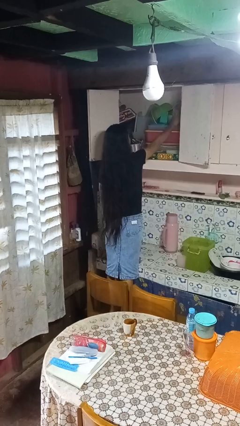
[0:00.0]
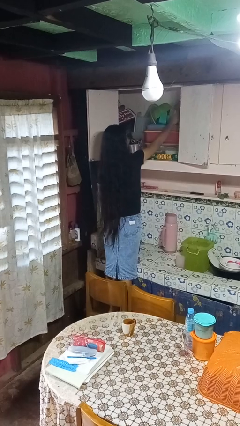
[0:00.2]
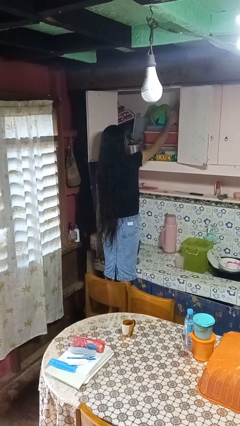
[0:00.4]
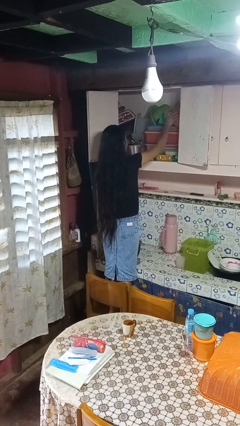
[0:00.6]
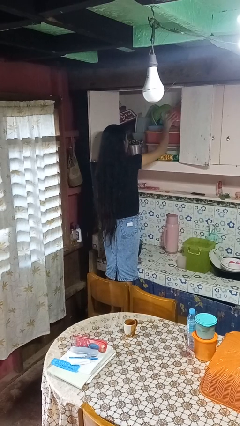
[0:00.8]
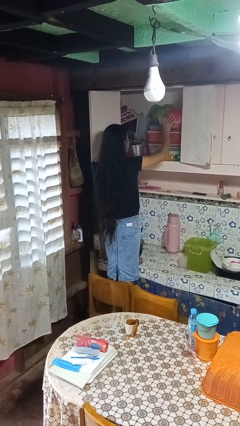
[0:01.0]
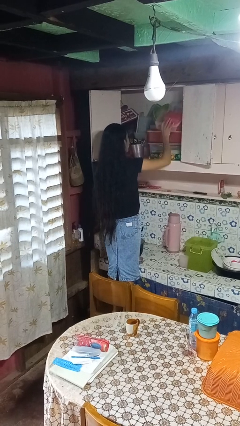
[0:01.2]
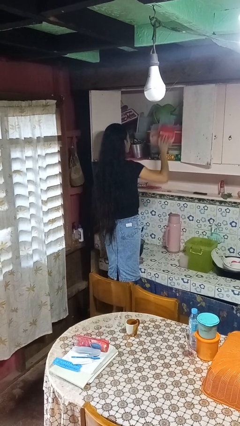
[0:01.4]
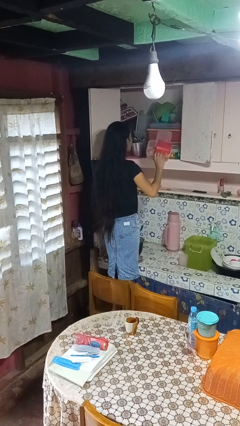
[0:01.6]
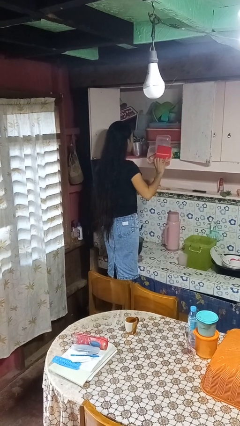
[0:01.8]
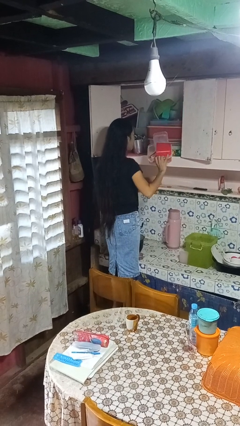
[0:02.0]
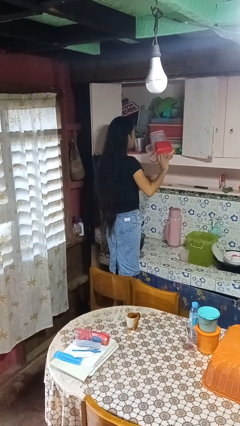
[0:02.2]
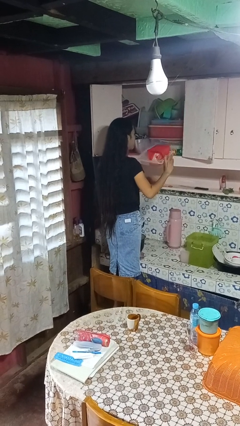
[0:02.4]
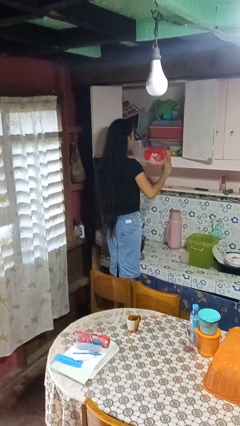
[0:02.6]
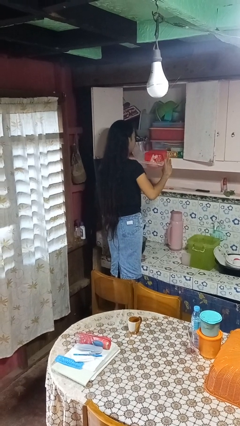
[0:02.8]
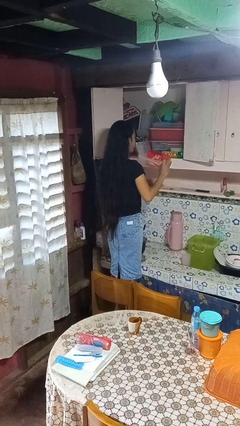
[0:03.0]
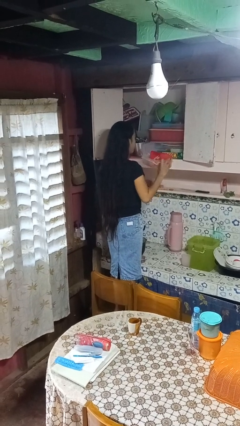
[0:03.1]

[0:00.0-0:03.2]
person takes object from cabinet

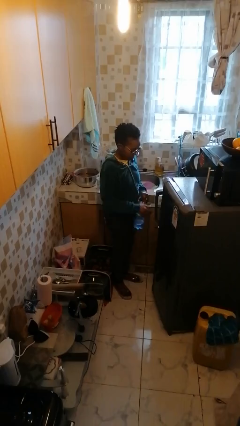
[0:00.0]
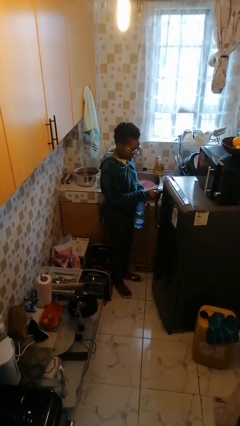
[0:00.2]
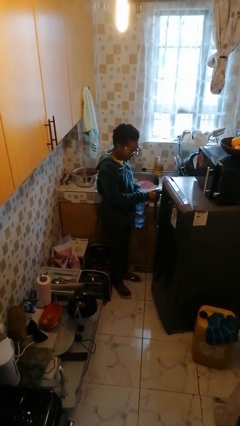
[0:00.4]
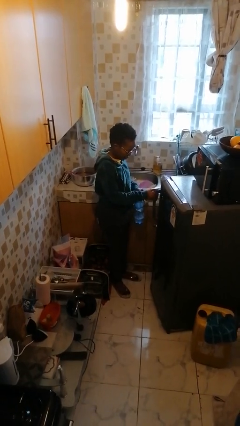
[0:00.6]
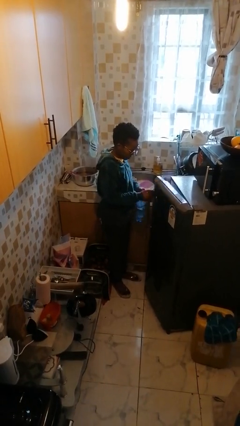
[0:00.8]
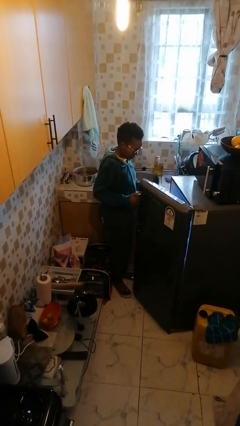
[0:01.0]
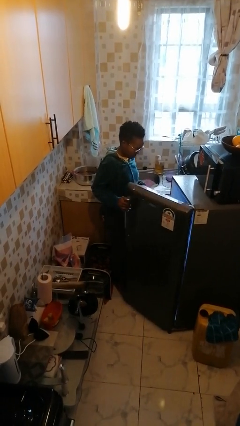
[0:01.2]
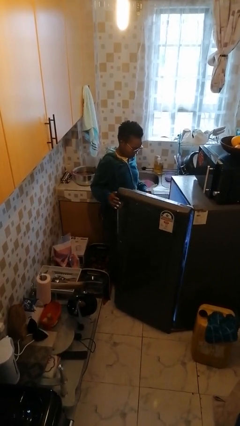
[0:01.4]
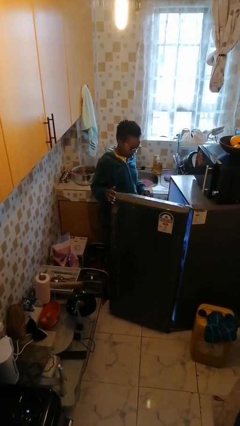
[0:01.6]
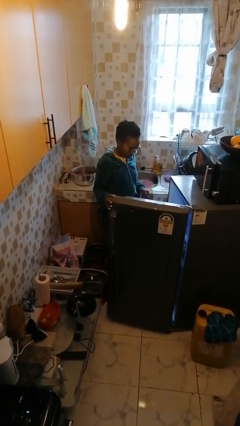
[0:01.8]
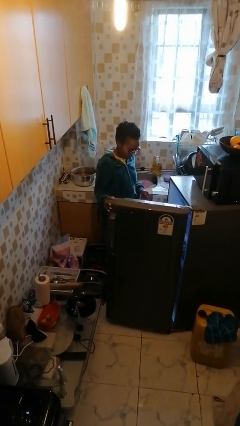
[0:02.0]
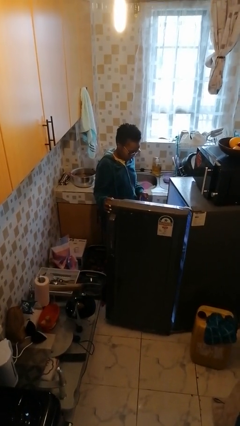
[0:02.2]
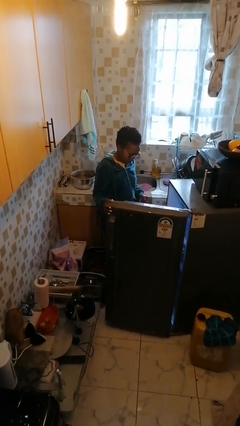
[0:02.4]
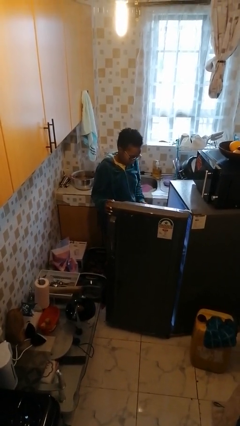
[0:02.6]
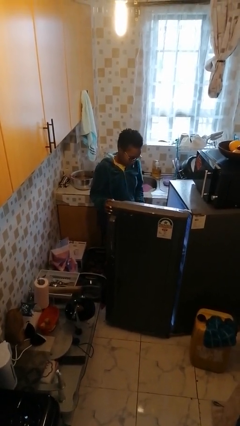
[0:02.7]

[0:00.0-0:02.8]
person opens refrigerator

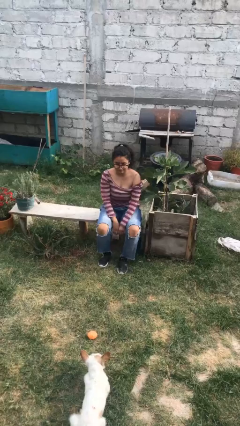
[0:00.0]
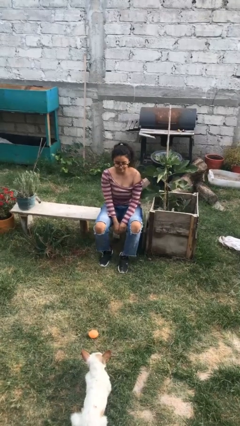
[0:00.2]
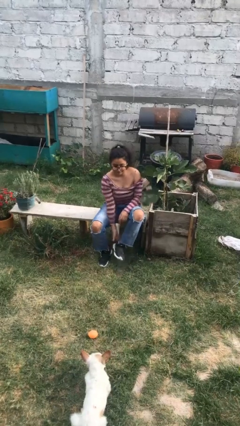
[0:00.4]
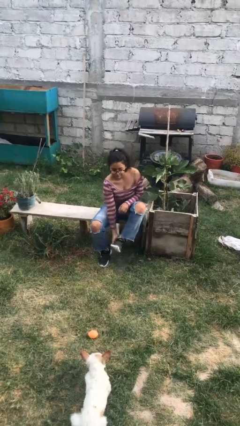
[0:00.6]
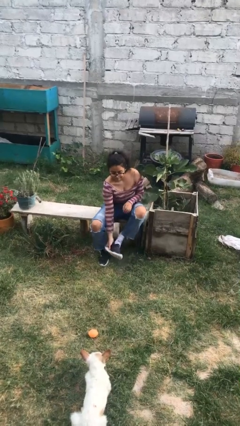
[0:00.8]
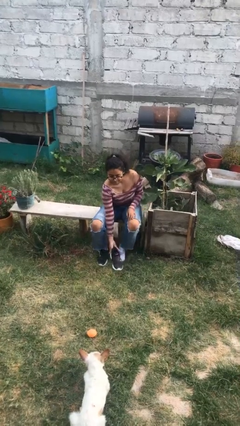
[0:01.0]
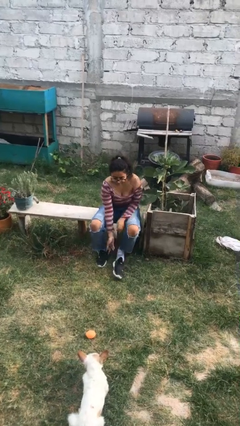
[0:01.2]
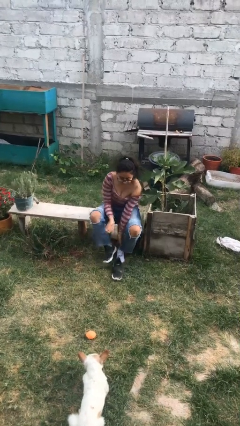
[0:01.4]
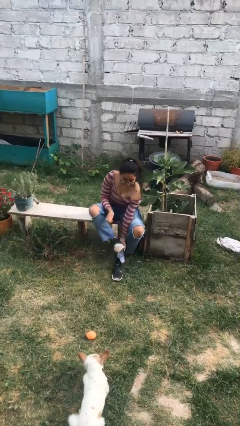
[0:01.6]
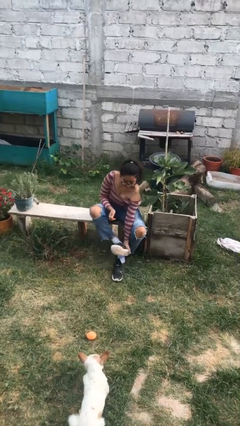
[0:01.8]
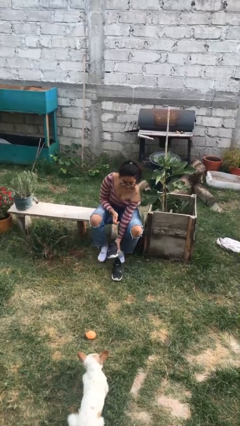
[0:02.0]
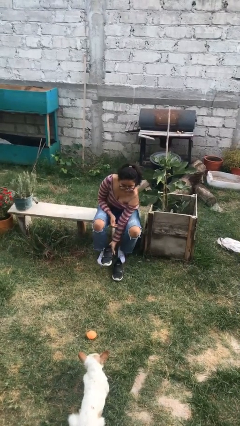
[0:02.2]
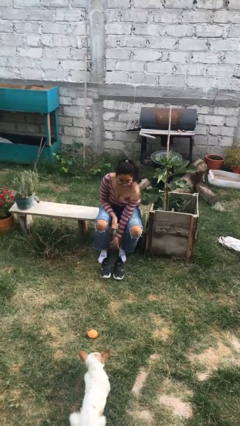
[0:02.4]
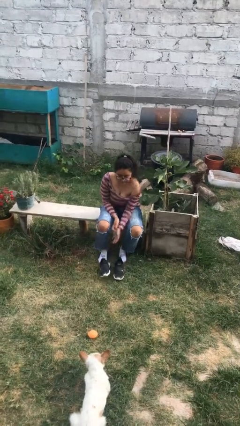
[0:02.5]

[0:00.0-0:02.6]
person takes off shoes

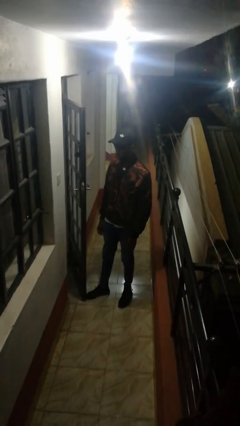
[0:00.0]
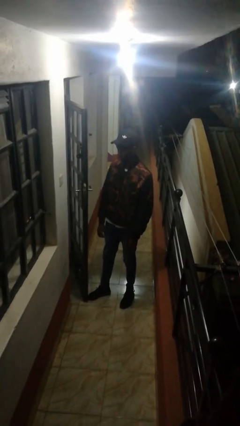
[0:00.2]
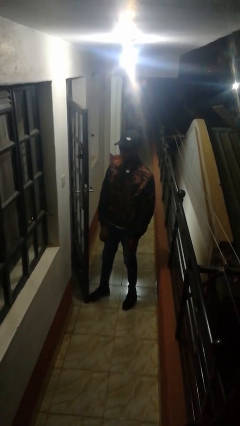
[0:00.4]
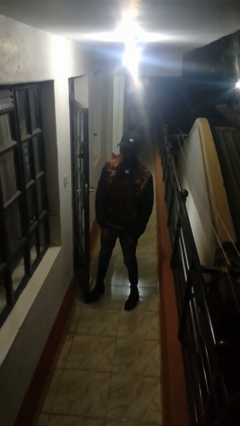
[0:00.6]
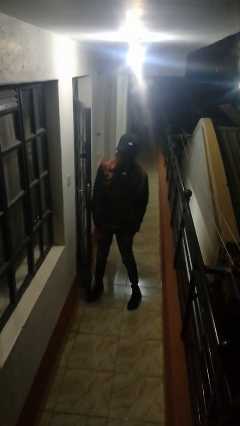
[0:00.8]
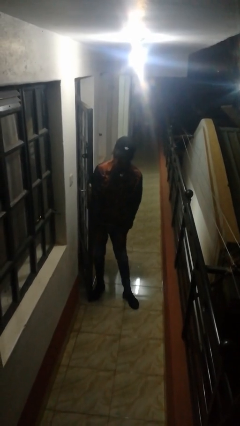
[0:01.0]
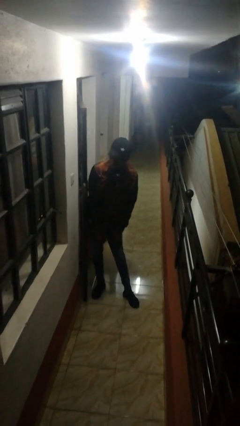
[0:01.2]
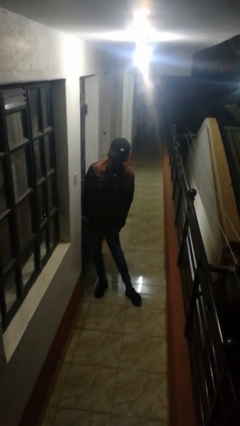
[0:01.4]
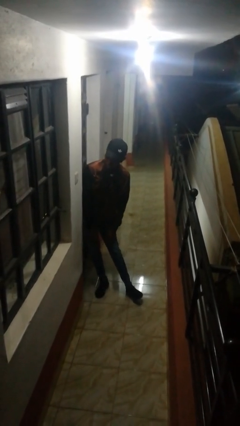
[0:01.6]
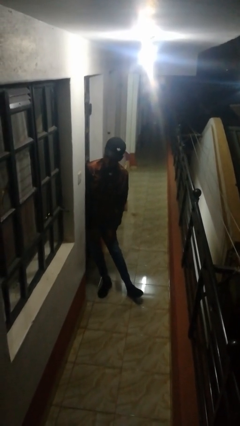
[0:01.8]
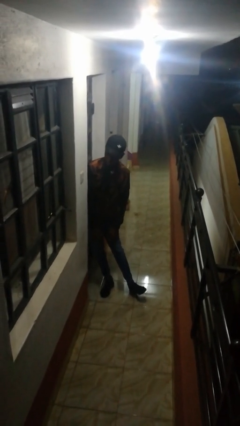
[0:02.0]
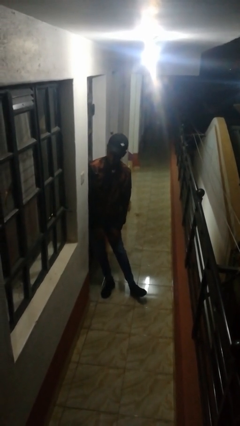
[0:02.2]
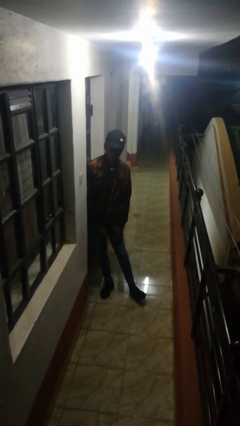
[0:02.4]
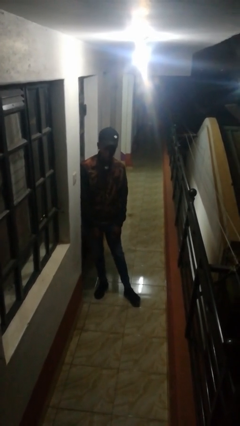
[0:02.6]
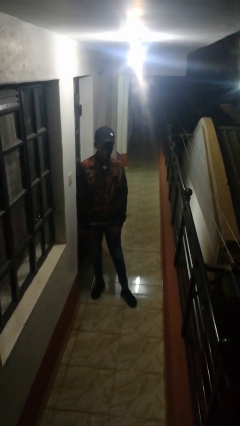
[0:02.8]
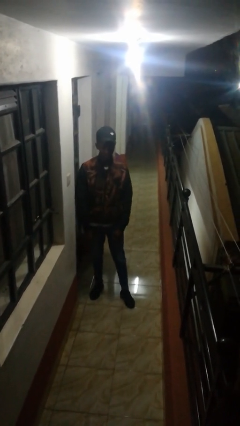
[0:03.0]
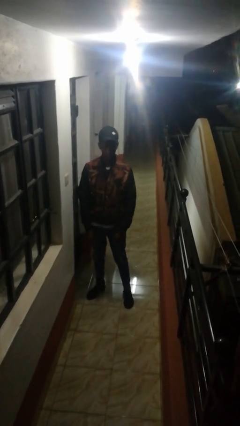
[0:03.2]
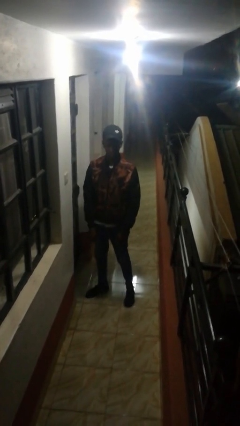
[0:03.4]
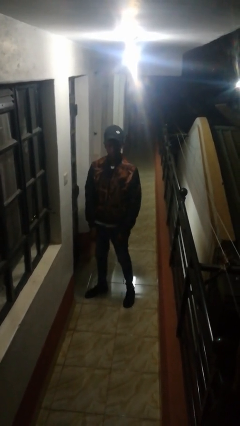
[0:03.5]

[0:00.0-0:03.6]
person closes door with hip

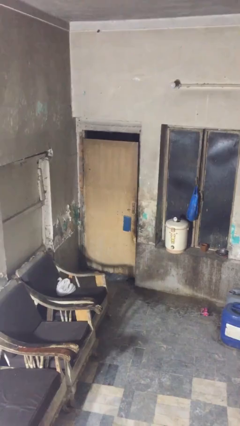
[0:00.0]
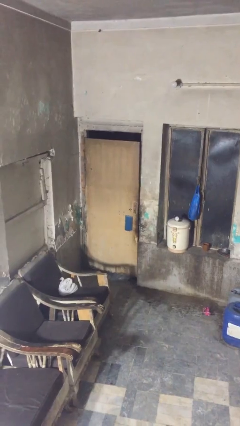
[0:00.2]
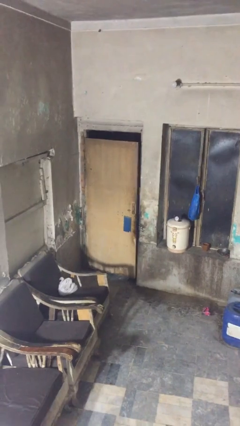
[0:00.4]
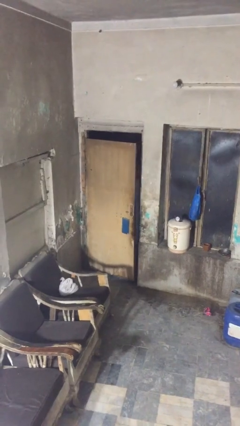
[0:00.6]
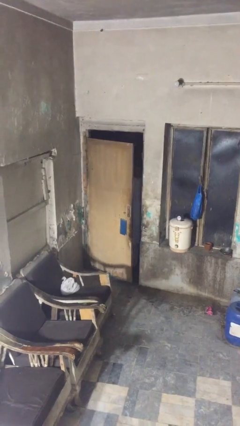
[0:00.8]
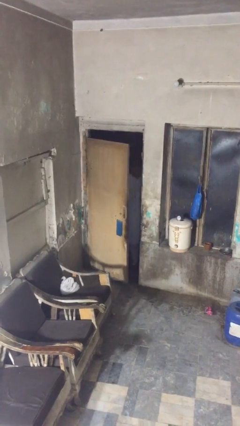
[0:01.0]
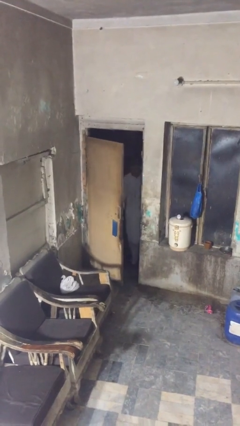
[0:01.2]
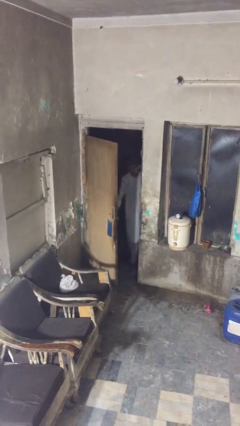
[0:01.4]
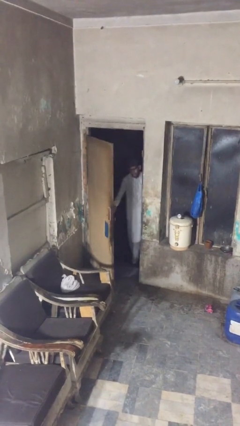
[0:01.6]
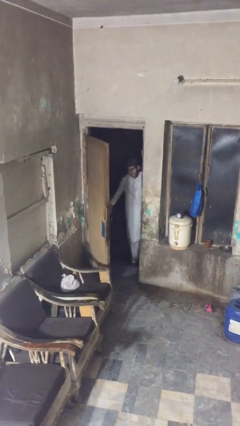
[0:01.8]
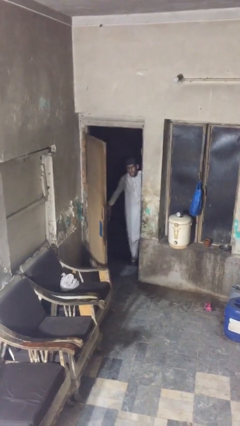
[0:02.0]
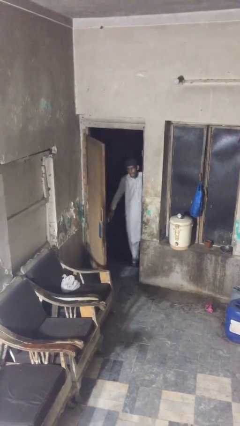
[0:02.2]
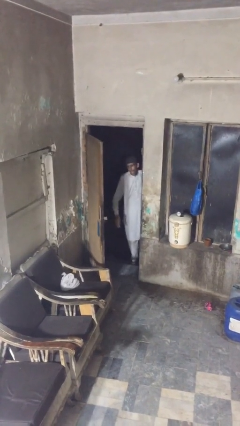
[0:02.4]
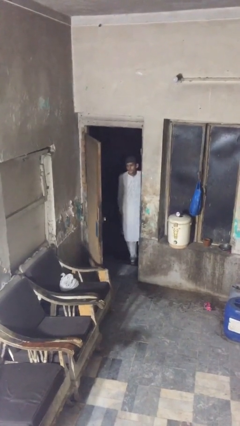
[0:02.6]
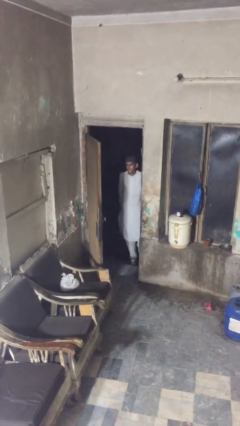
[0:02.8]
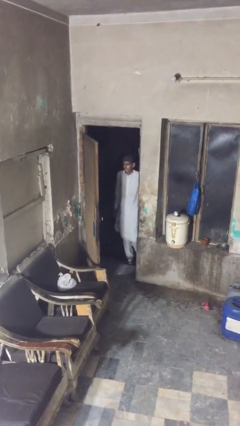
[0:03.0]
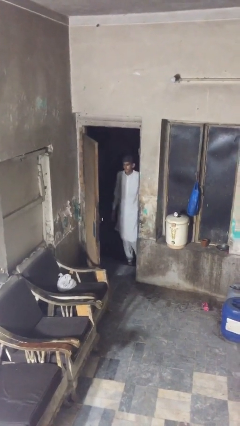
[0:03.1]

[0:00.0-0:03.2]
person opens facility door

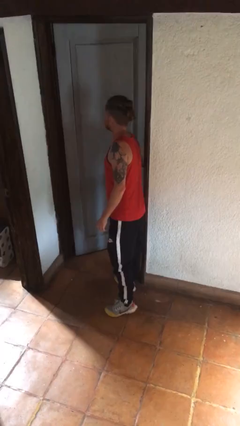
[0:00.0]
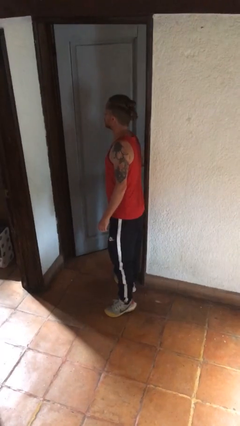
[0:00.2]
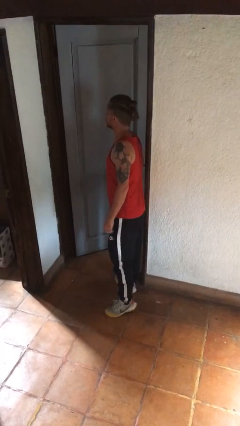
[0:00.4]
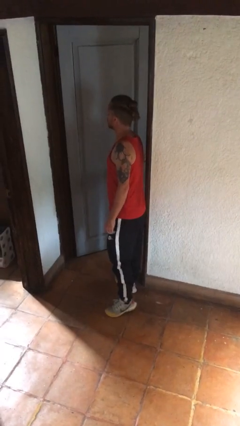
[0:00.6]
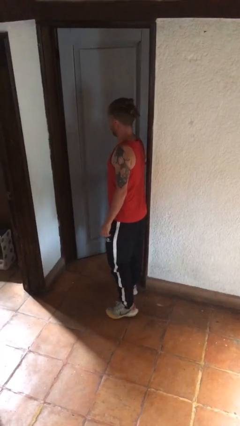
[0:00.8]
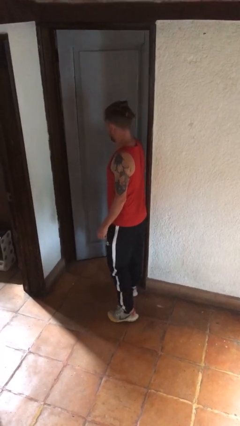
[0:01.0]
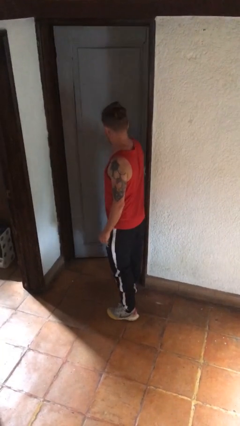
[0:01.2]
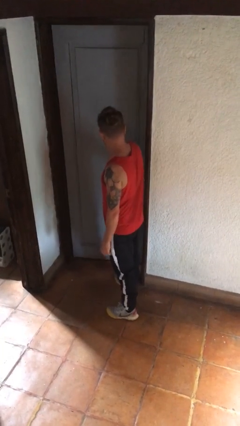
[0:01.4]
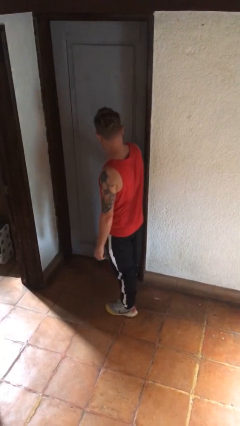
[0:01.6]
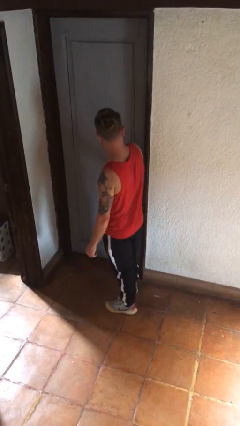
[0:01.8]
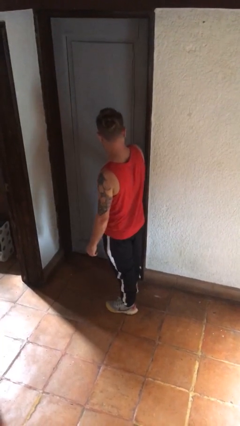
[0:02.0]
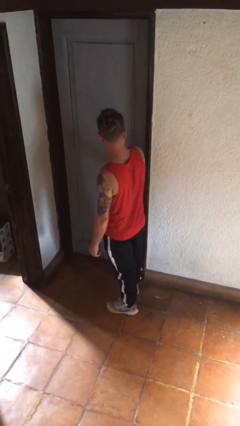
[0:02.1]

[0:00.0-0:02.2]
person closes facility door
